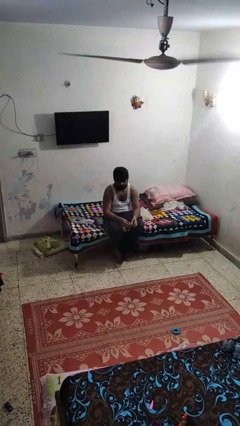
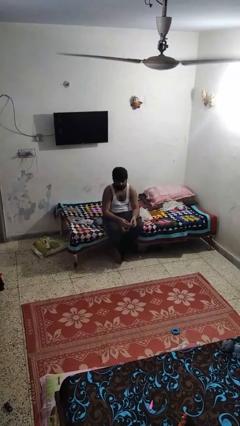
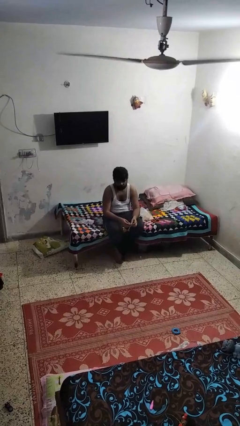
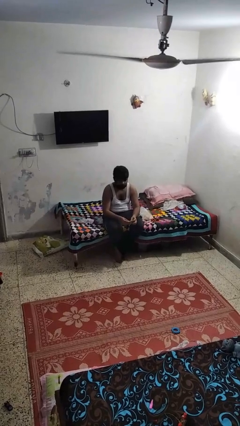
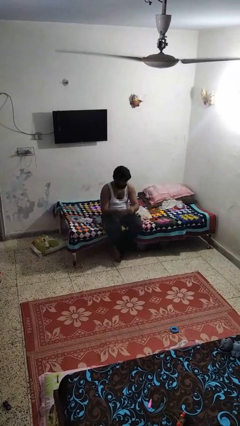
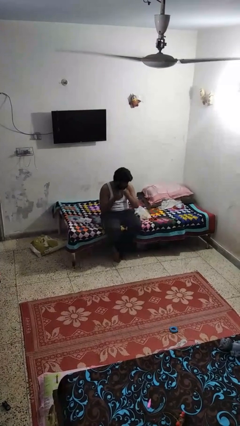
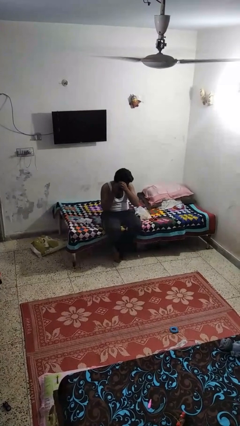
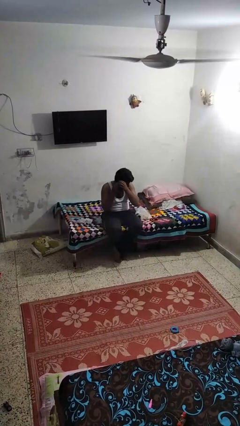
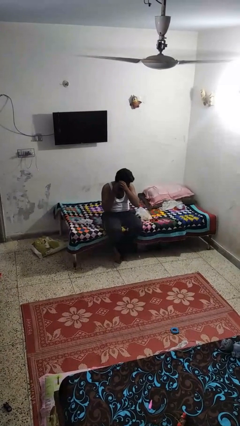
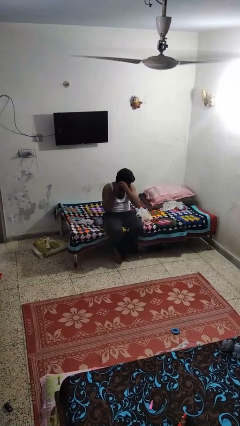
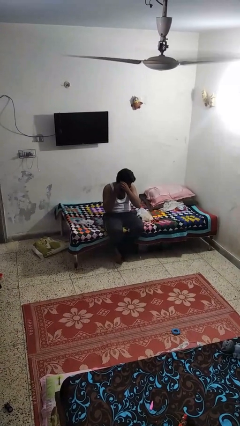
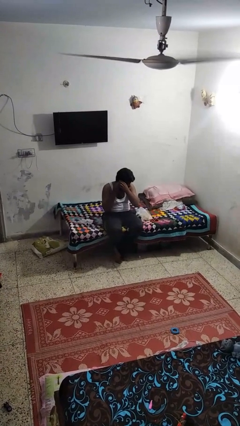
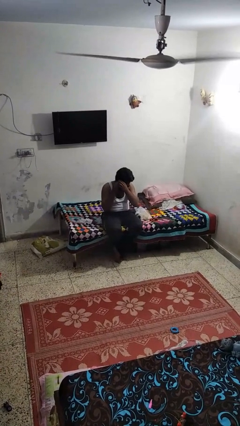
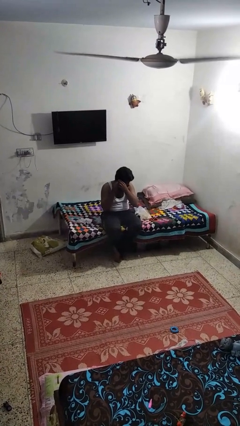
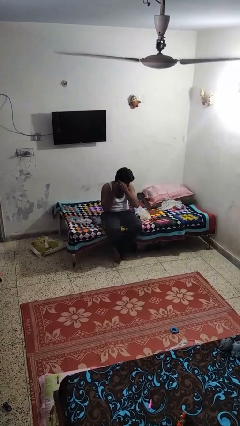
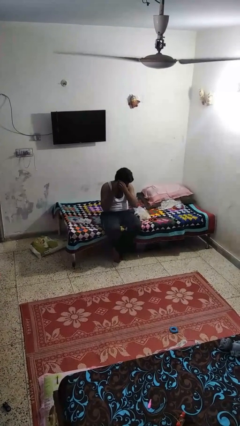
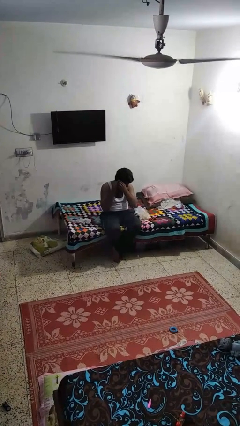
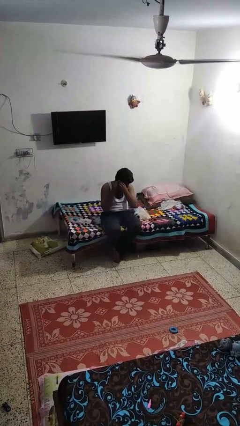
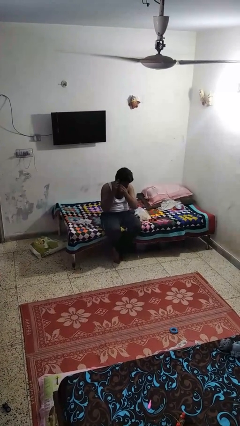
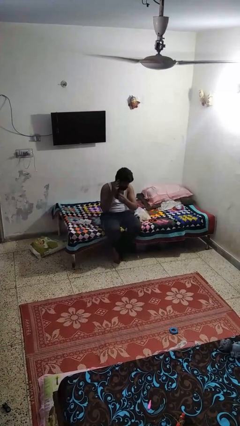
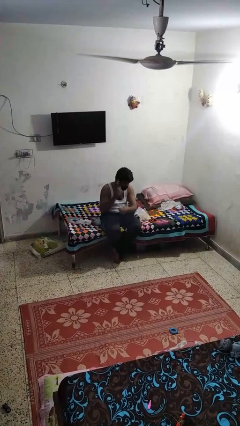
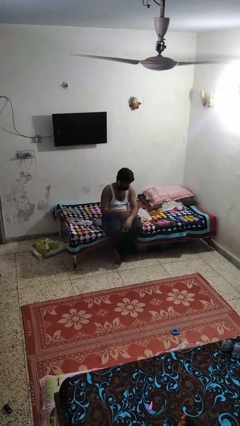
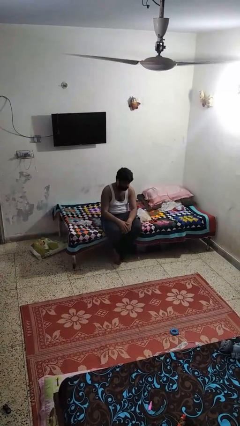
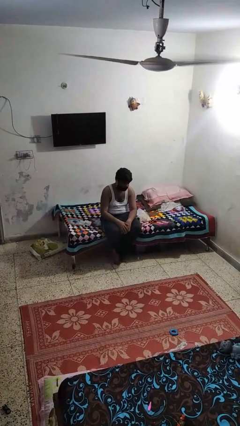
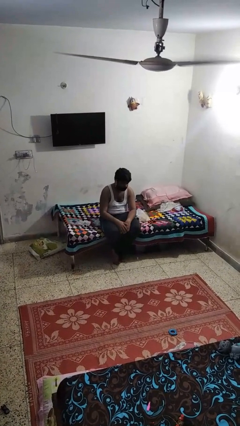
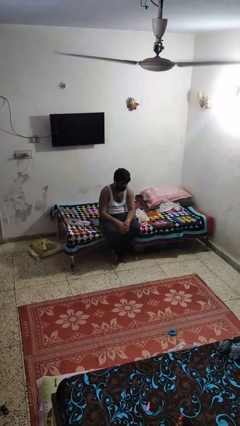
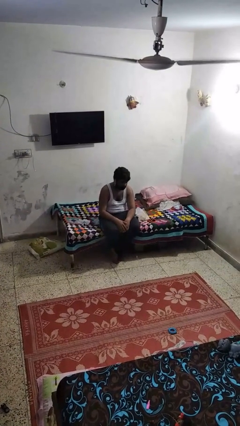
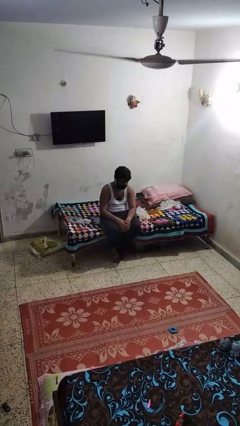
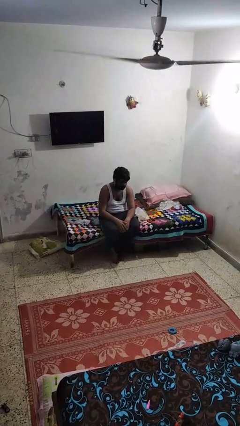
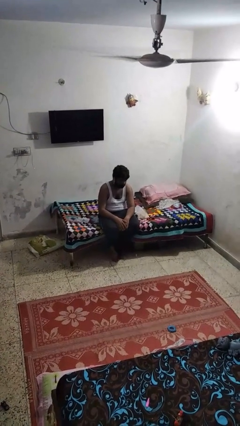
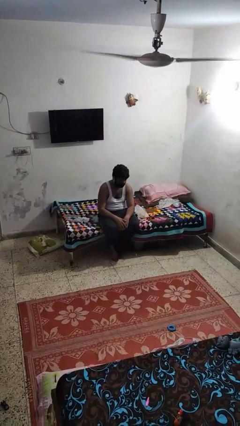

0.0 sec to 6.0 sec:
person puts on earrings

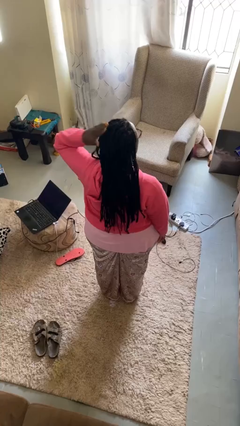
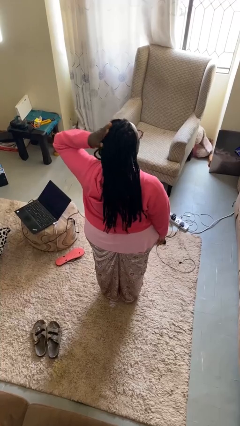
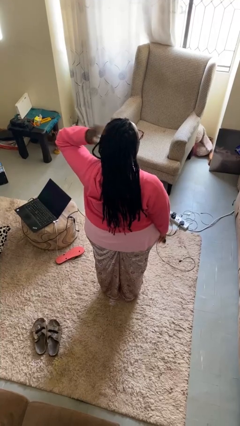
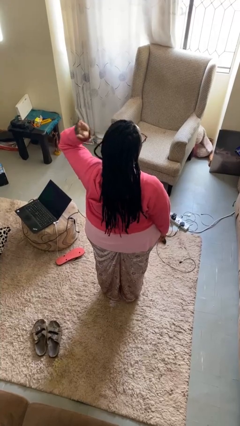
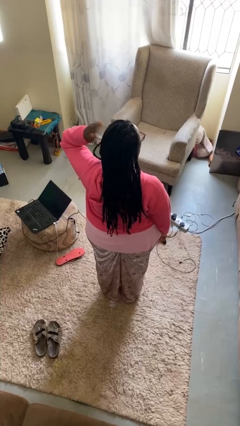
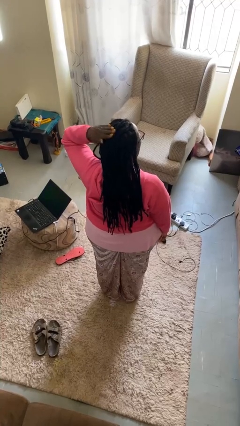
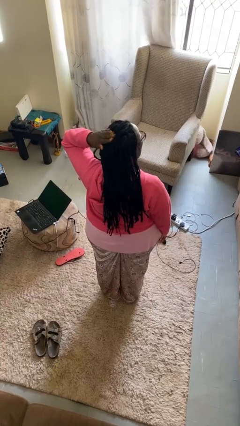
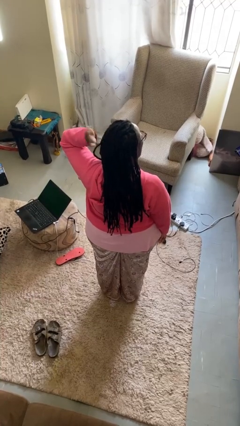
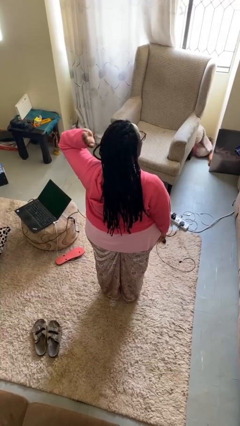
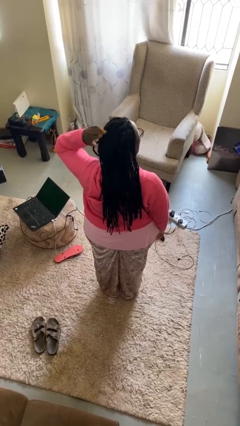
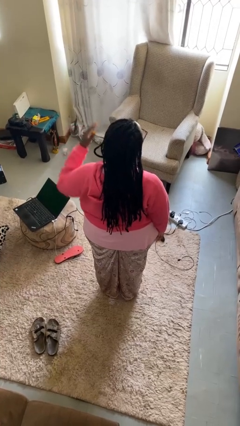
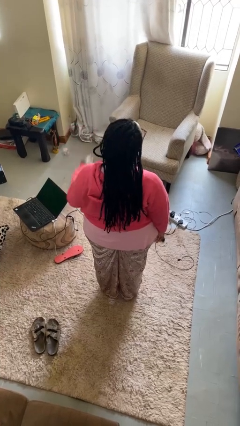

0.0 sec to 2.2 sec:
person pats head

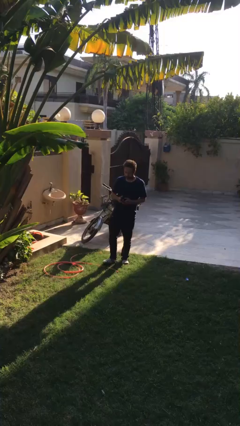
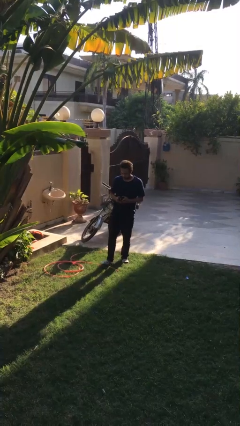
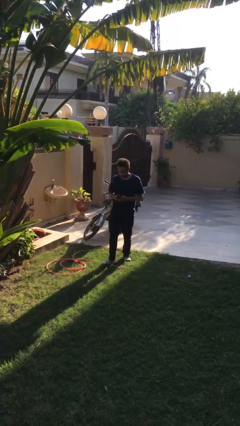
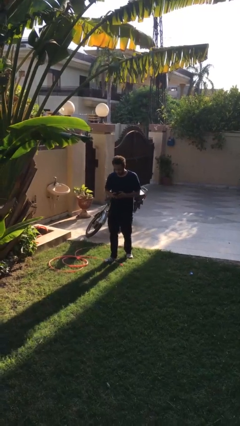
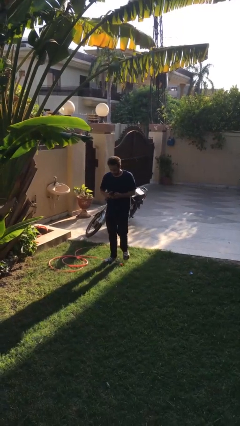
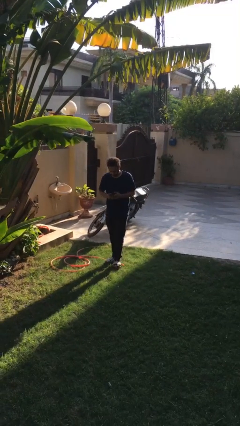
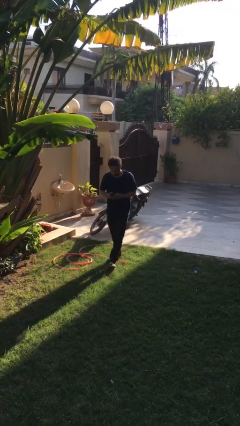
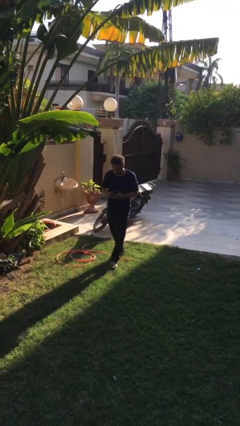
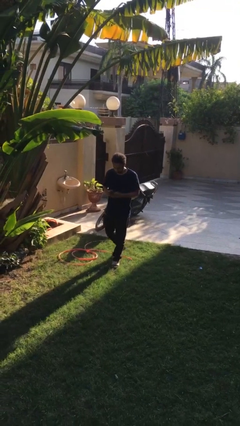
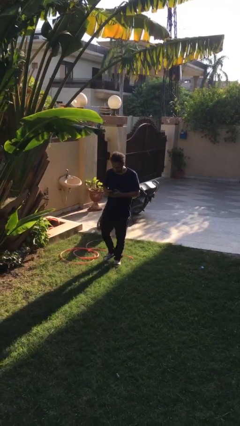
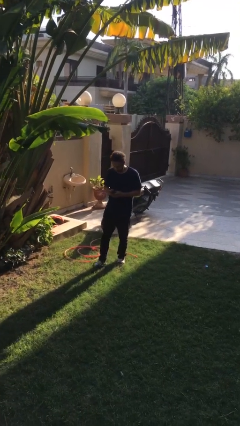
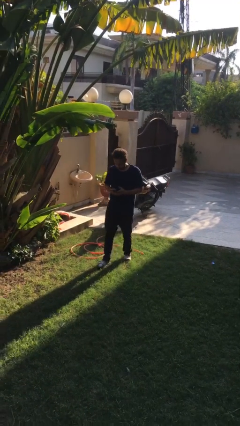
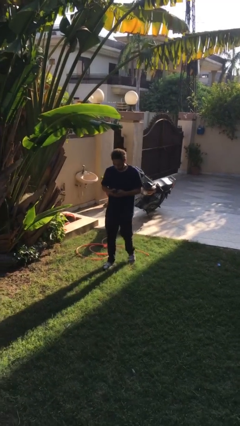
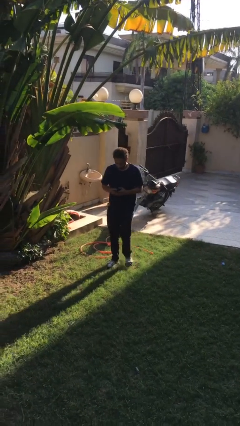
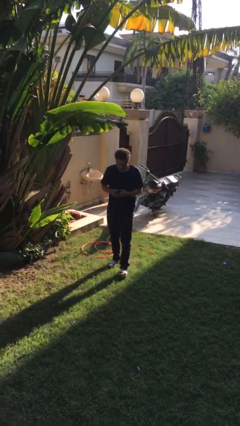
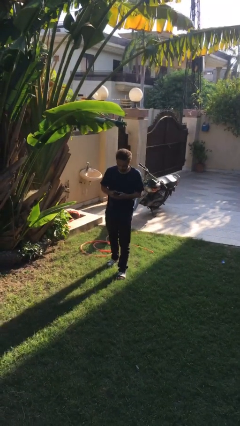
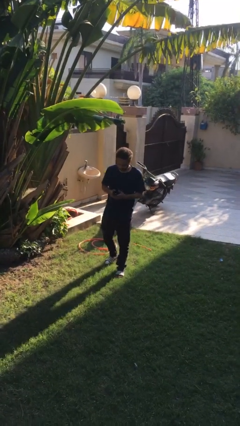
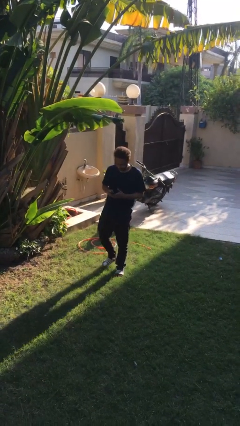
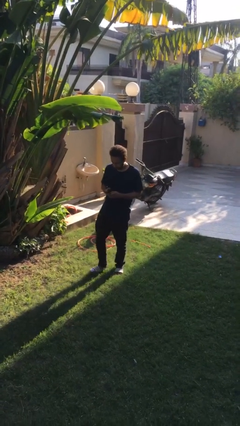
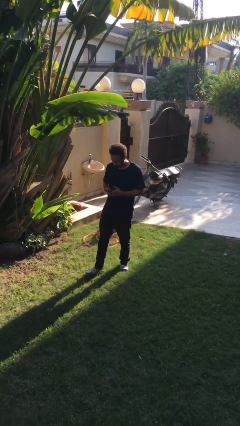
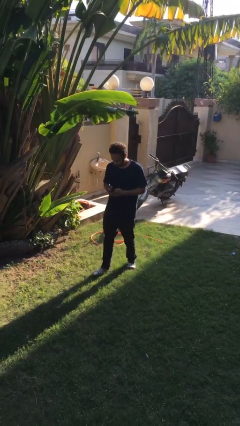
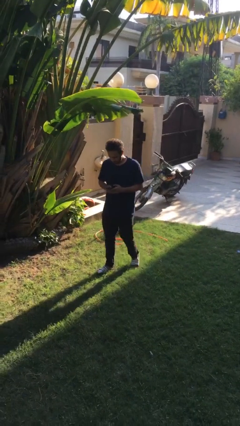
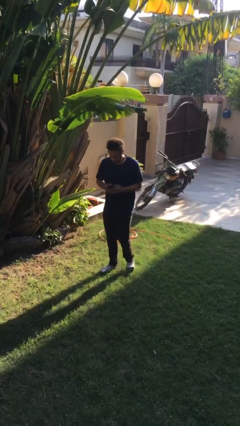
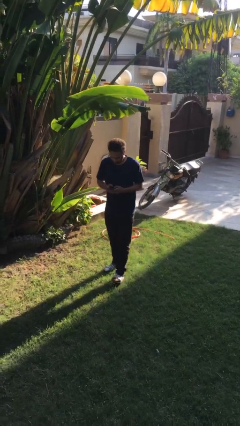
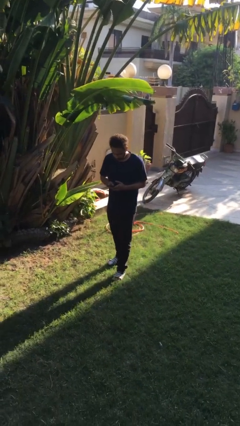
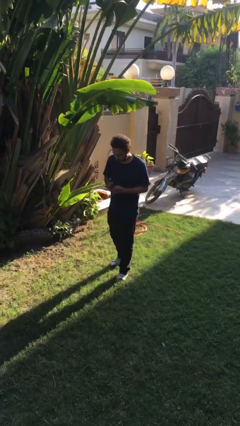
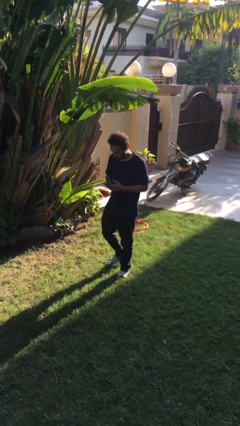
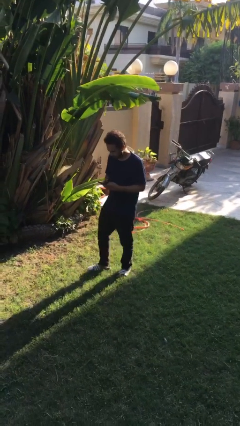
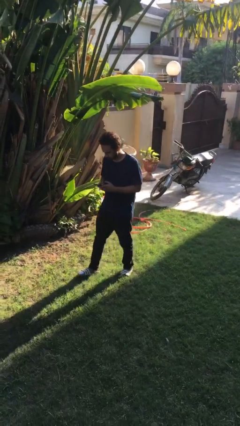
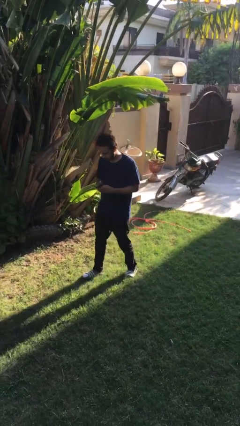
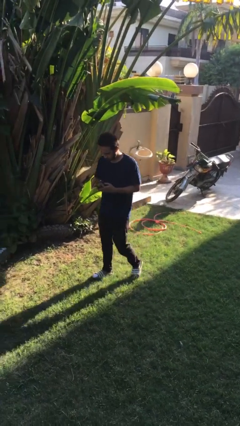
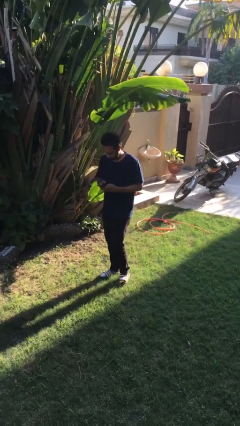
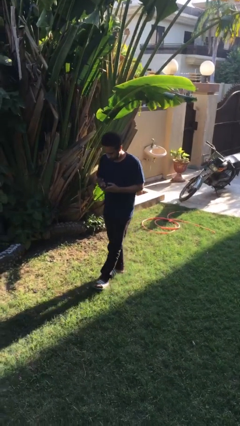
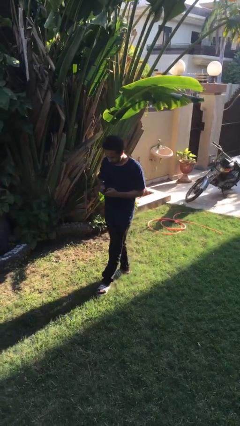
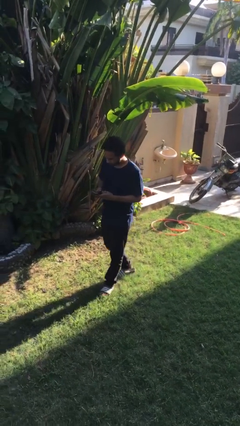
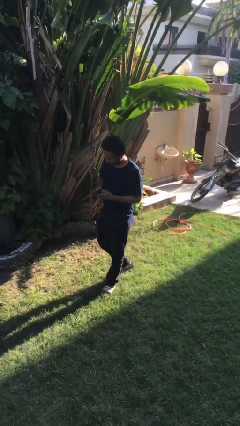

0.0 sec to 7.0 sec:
person texts on phone

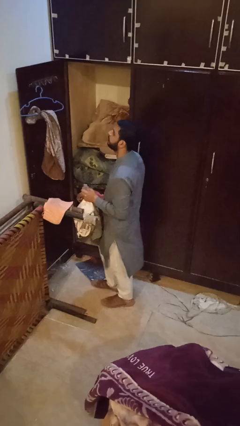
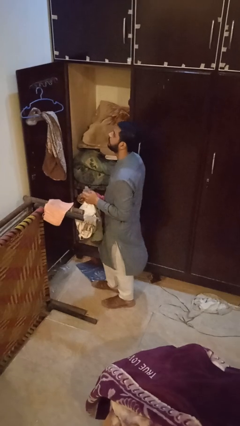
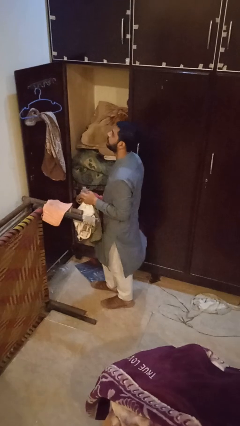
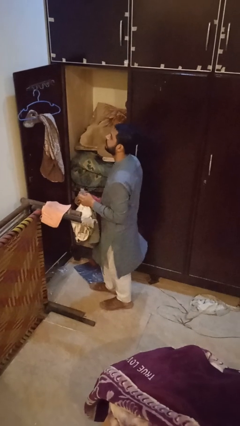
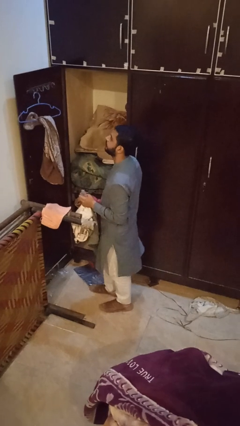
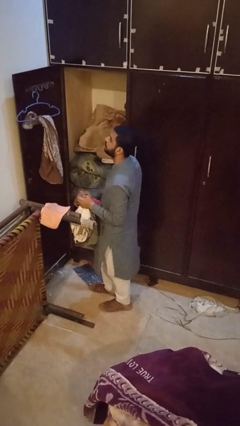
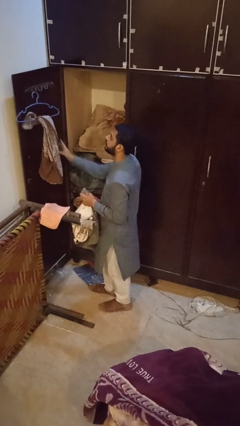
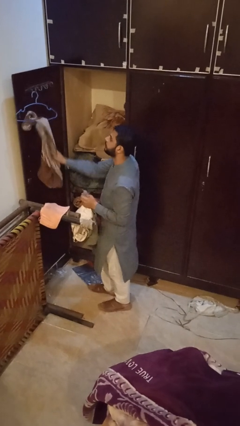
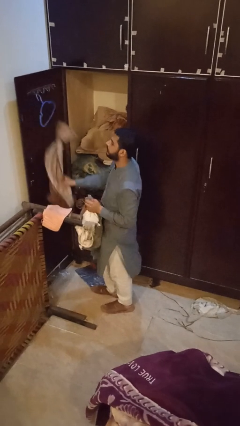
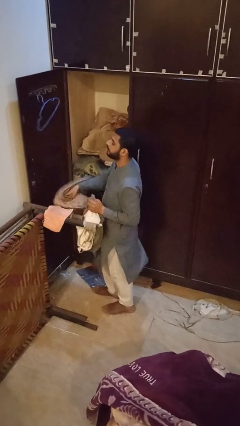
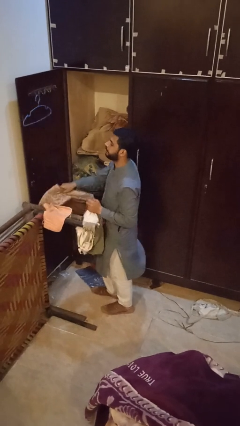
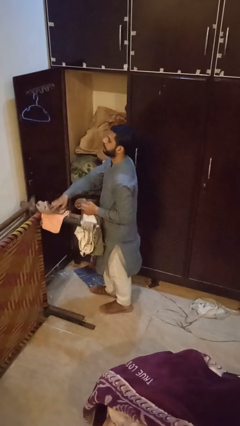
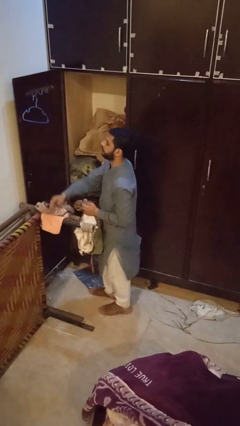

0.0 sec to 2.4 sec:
person takes clothes from closet
